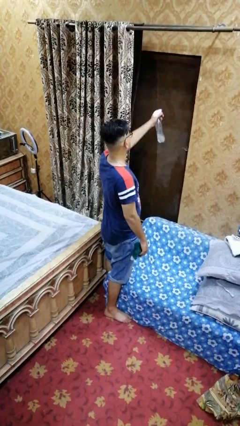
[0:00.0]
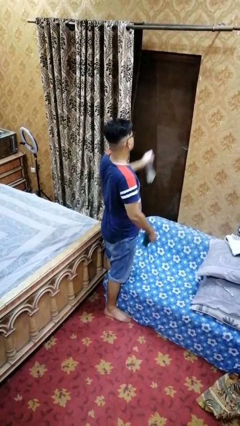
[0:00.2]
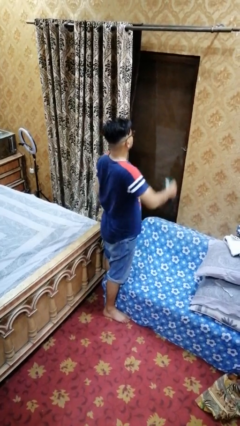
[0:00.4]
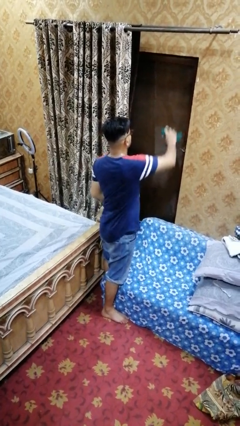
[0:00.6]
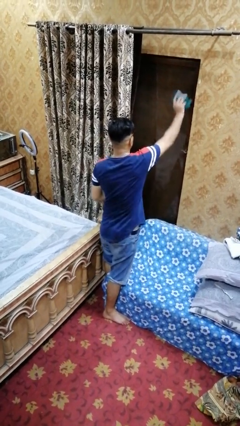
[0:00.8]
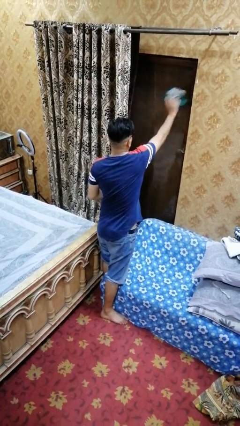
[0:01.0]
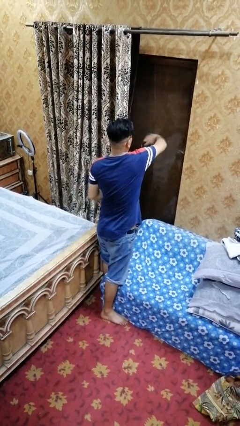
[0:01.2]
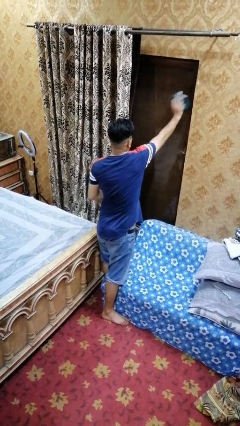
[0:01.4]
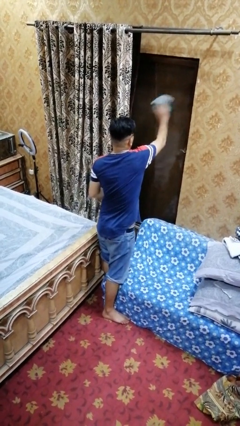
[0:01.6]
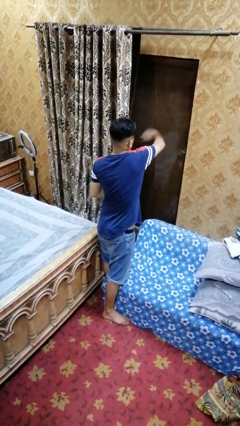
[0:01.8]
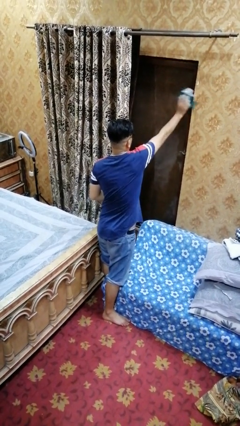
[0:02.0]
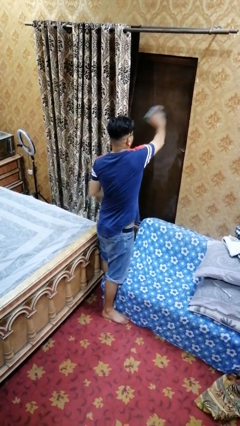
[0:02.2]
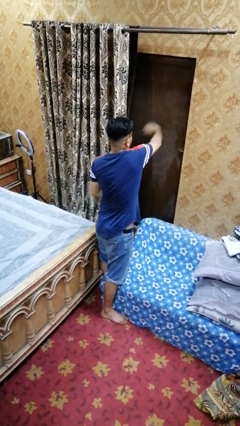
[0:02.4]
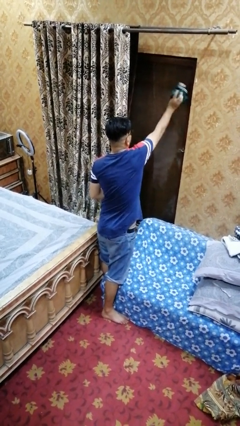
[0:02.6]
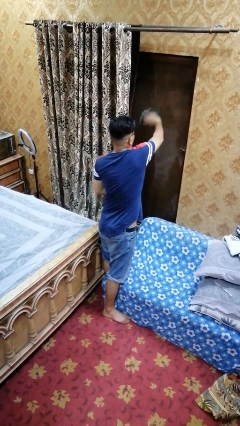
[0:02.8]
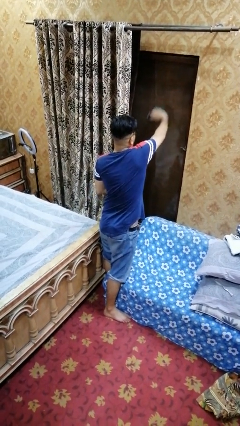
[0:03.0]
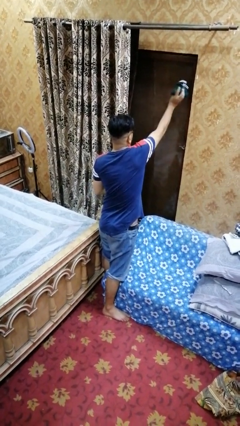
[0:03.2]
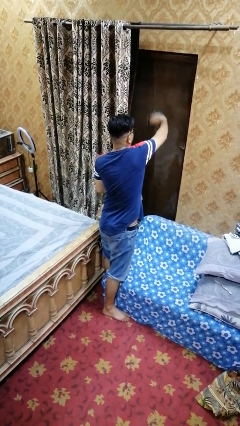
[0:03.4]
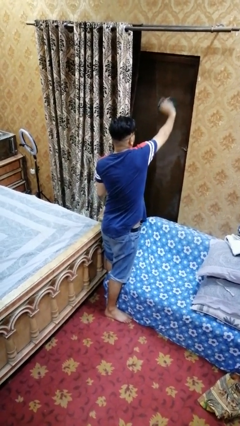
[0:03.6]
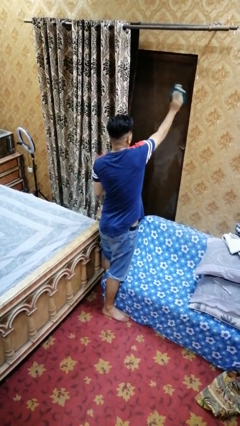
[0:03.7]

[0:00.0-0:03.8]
person washes window

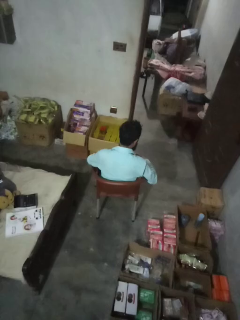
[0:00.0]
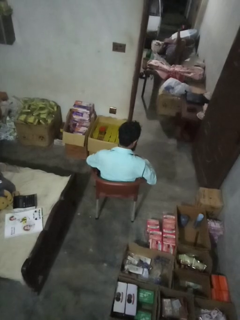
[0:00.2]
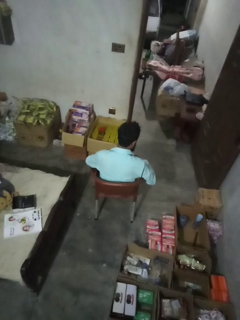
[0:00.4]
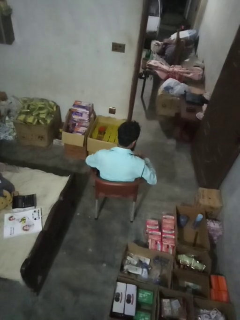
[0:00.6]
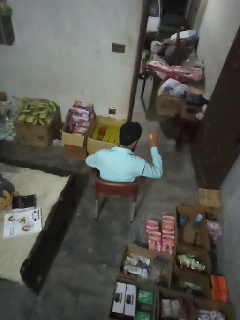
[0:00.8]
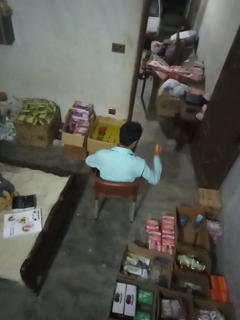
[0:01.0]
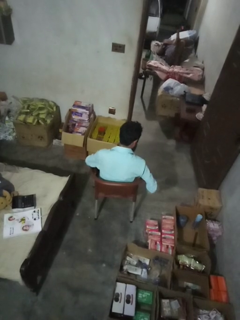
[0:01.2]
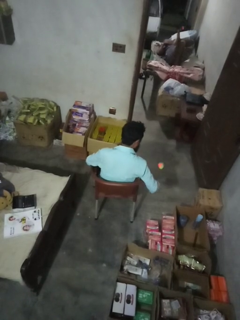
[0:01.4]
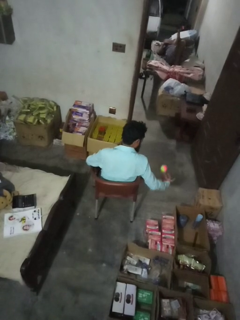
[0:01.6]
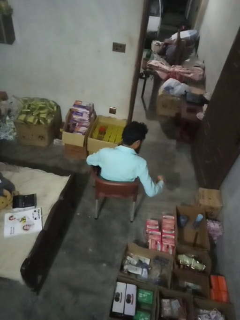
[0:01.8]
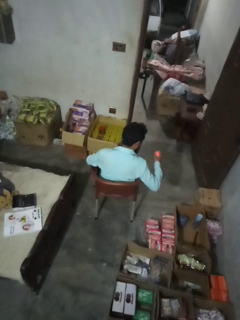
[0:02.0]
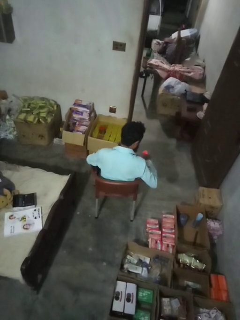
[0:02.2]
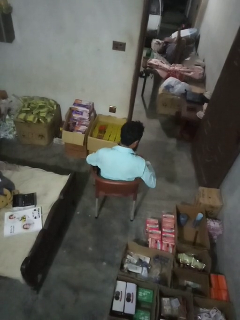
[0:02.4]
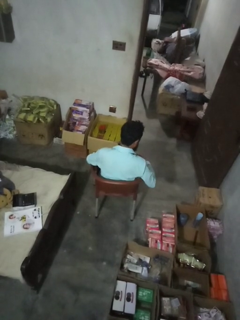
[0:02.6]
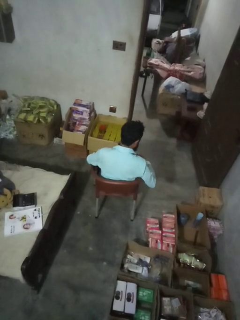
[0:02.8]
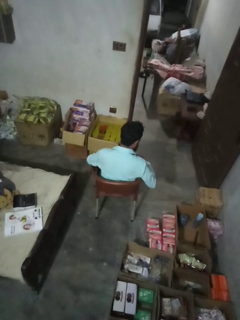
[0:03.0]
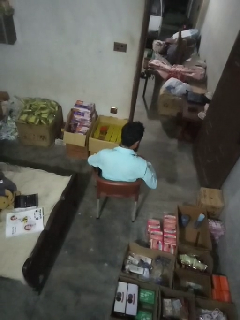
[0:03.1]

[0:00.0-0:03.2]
person bounces ball on floor

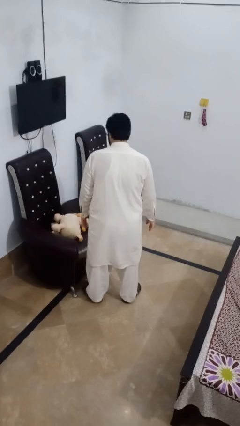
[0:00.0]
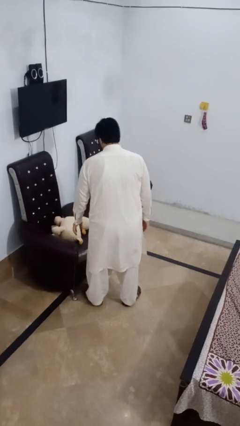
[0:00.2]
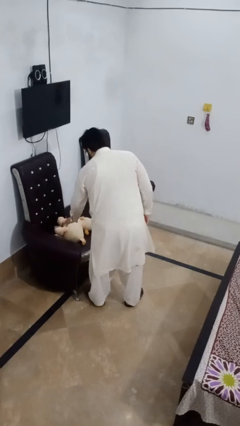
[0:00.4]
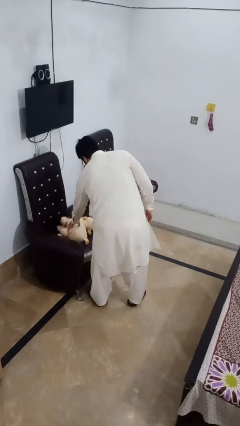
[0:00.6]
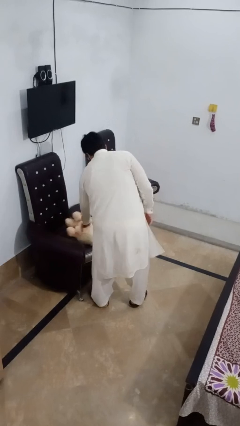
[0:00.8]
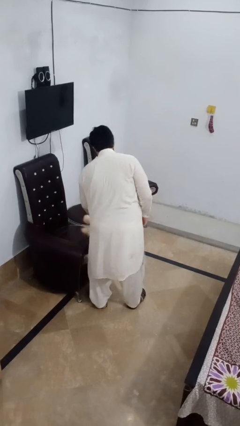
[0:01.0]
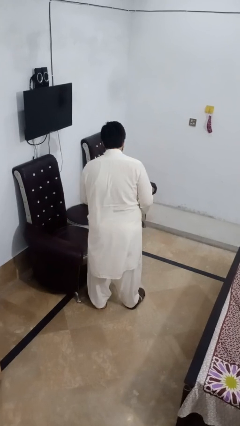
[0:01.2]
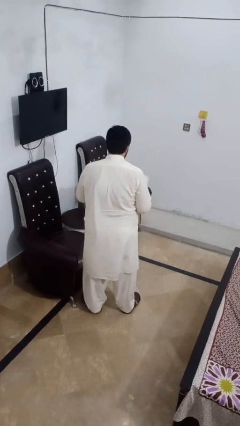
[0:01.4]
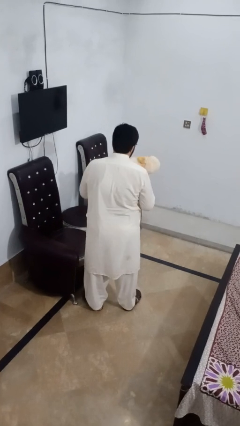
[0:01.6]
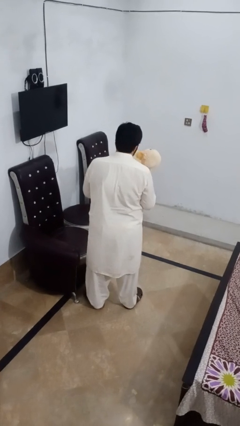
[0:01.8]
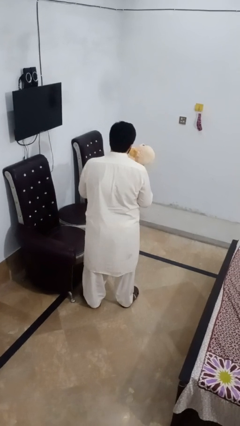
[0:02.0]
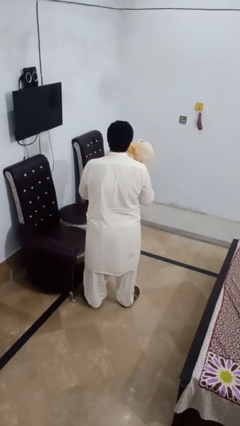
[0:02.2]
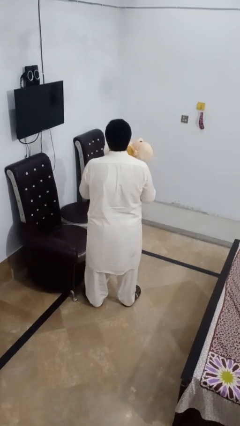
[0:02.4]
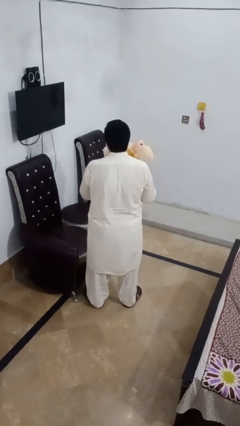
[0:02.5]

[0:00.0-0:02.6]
person picks up object from couch

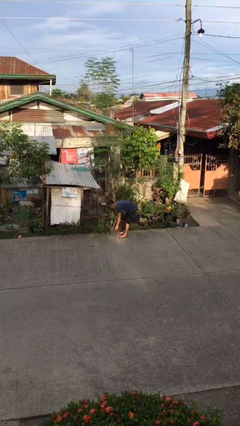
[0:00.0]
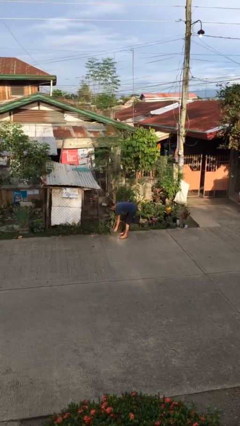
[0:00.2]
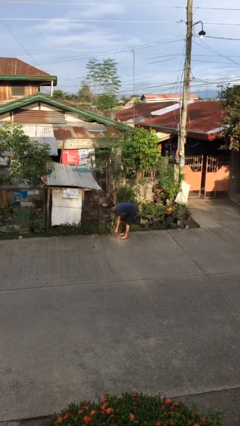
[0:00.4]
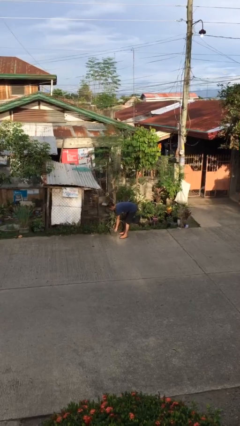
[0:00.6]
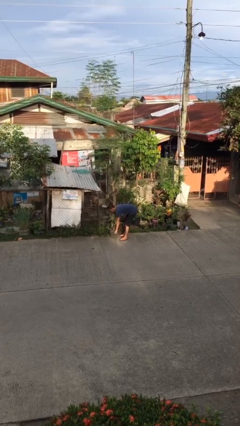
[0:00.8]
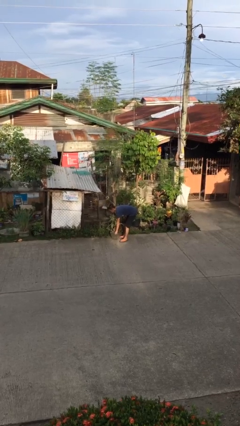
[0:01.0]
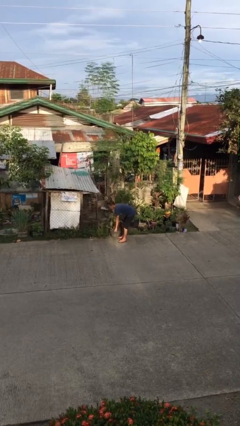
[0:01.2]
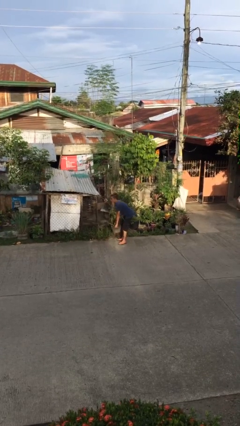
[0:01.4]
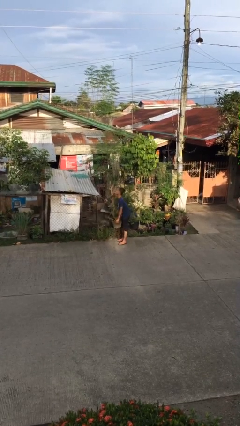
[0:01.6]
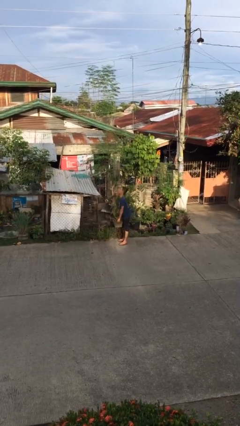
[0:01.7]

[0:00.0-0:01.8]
person picks up object from floor

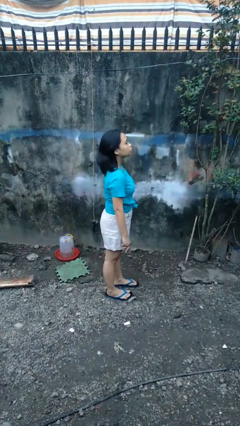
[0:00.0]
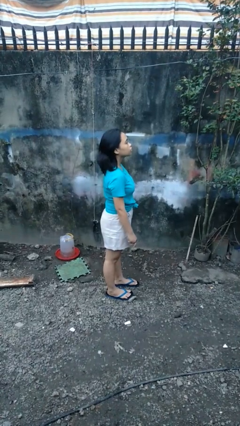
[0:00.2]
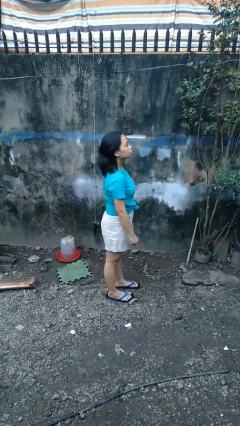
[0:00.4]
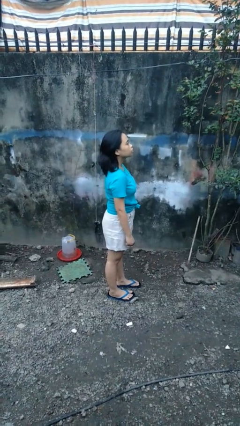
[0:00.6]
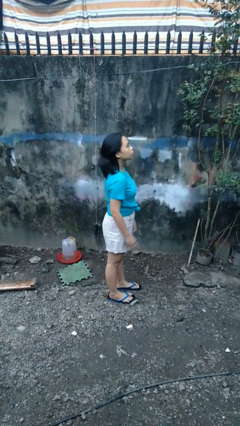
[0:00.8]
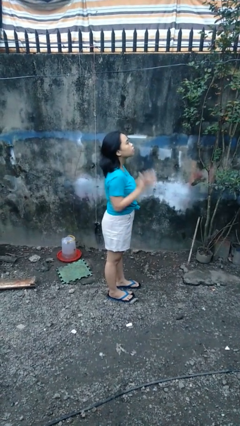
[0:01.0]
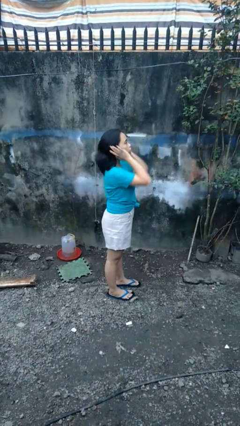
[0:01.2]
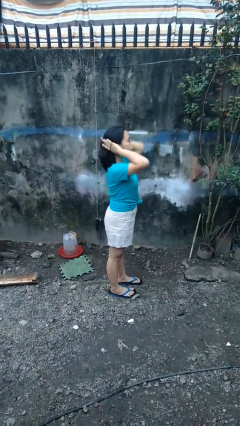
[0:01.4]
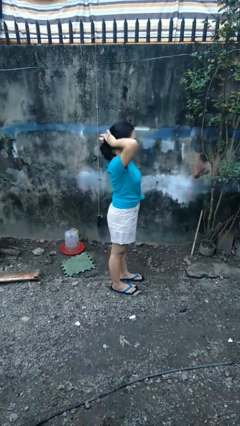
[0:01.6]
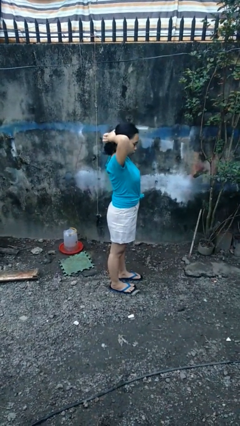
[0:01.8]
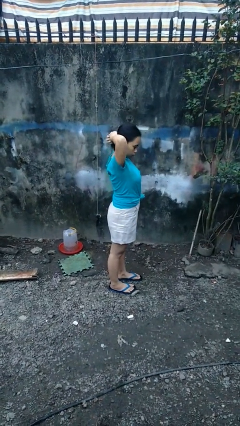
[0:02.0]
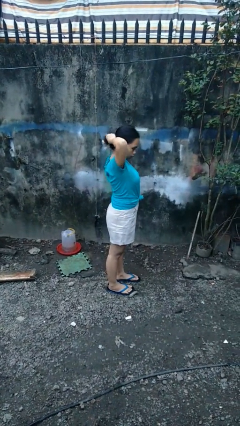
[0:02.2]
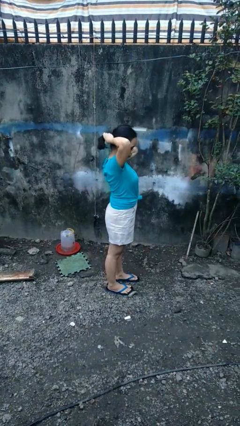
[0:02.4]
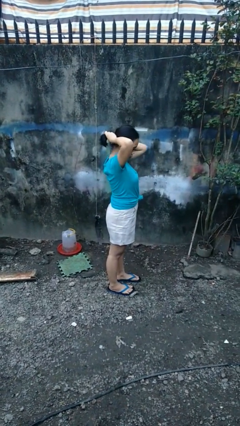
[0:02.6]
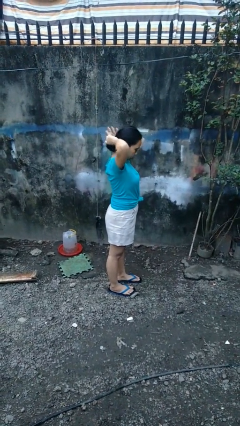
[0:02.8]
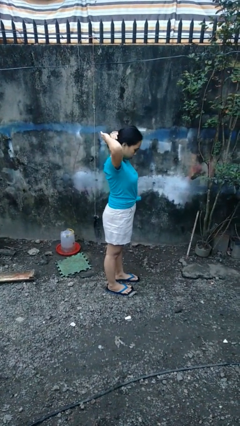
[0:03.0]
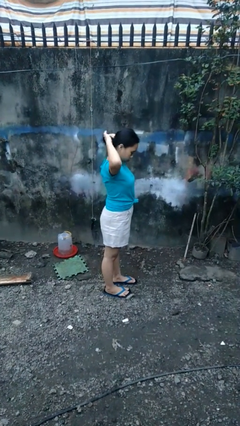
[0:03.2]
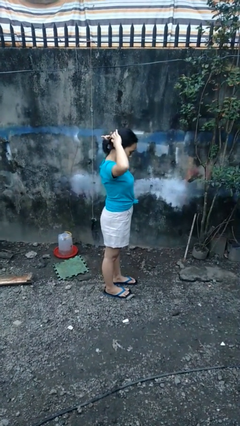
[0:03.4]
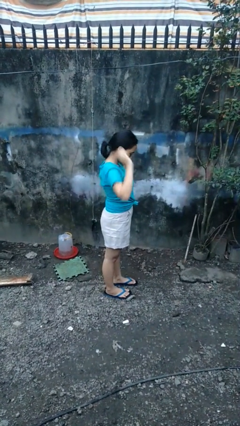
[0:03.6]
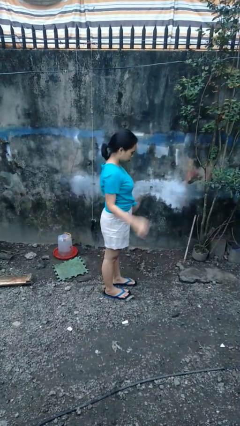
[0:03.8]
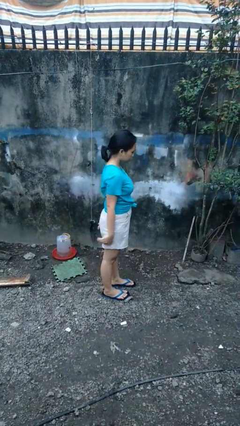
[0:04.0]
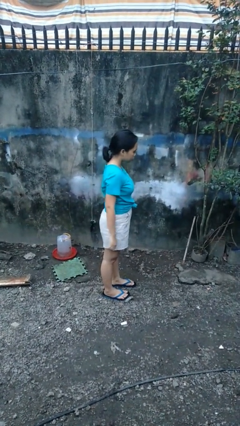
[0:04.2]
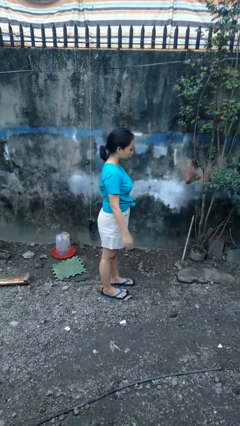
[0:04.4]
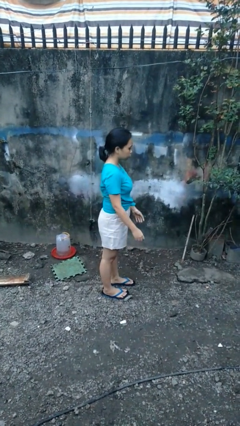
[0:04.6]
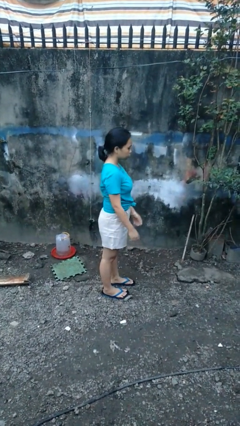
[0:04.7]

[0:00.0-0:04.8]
person puts hair in ponytail

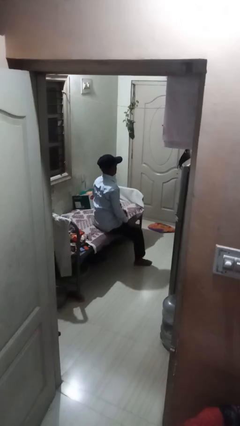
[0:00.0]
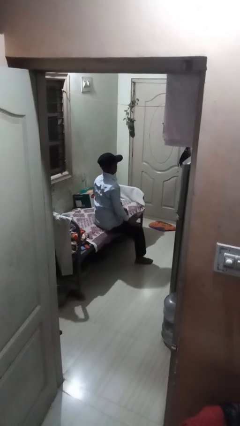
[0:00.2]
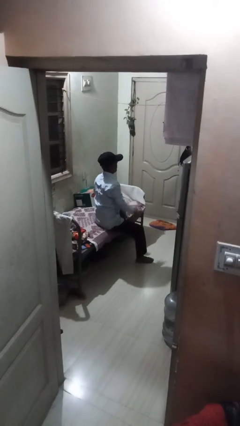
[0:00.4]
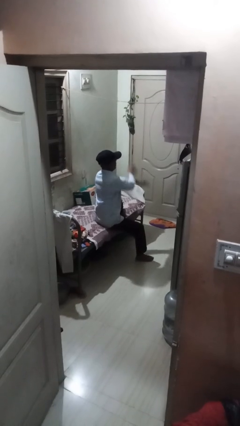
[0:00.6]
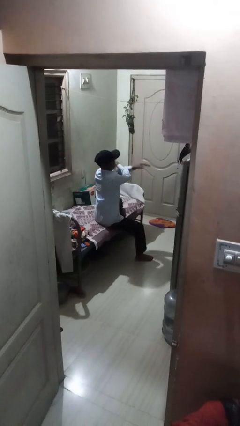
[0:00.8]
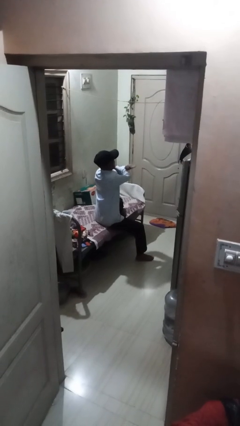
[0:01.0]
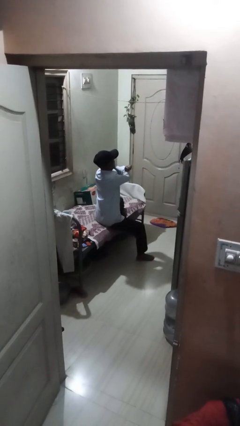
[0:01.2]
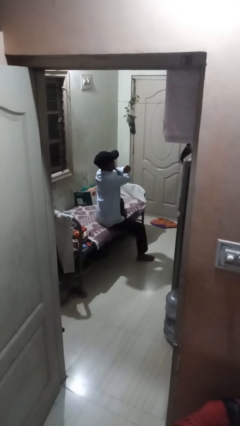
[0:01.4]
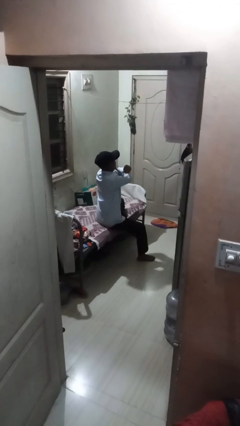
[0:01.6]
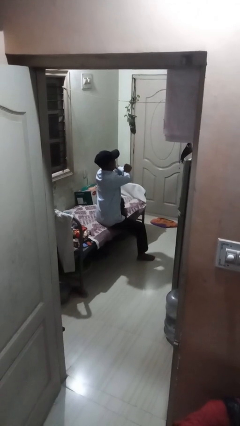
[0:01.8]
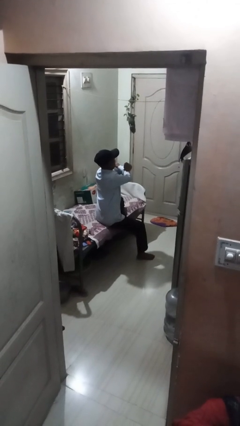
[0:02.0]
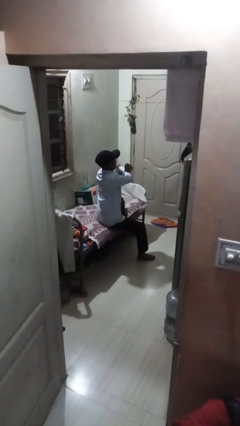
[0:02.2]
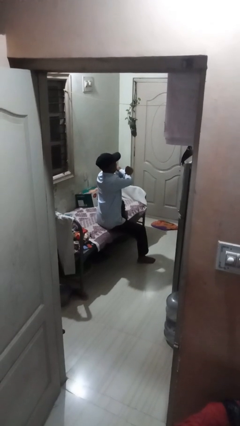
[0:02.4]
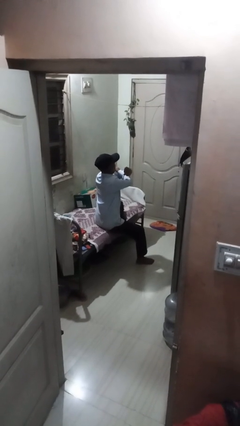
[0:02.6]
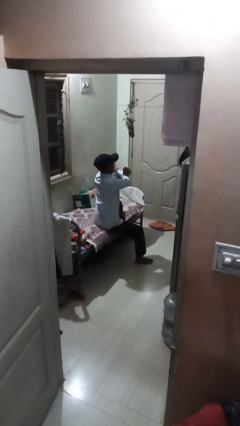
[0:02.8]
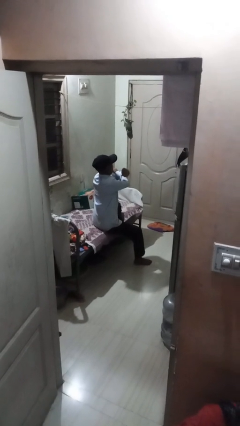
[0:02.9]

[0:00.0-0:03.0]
person gestures arms x
